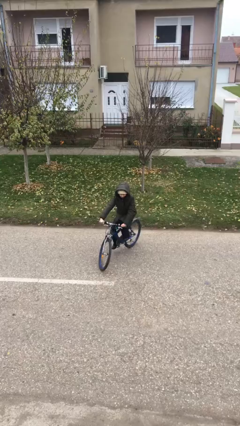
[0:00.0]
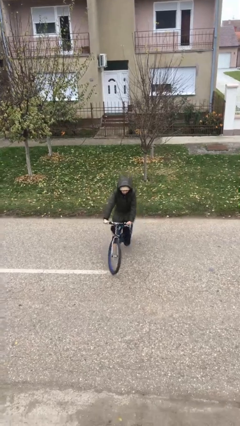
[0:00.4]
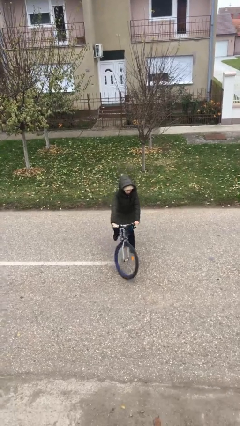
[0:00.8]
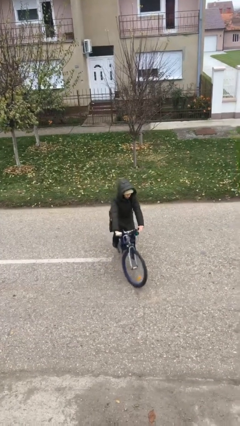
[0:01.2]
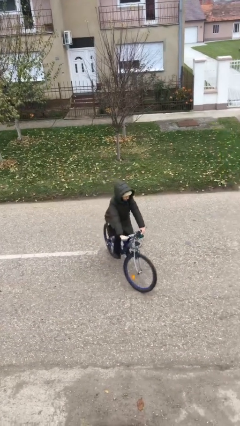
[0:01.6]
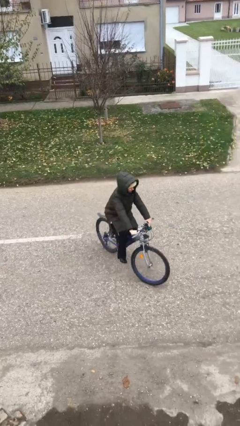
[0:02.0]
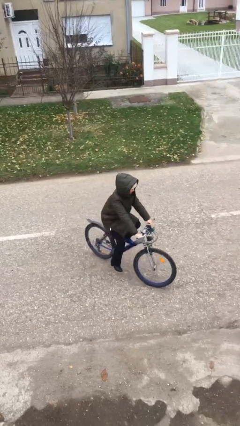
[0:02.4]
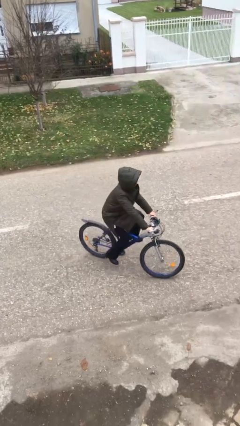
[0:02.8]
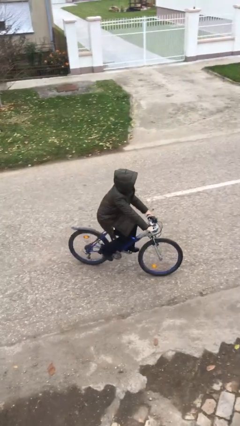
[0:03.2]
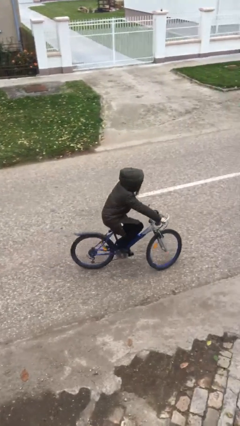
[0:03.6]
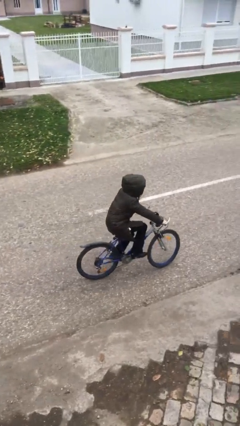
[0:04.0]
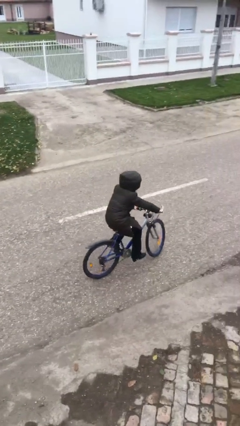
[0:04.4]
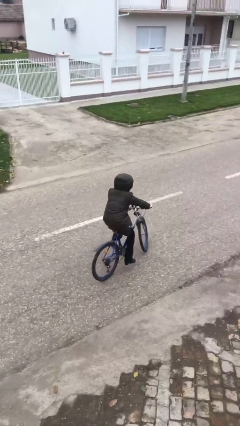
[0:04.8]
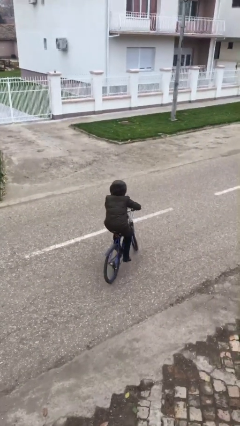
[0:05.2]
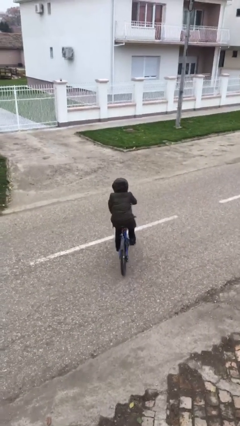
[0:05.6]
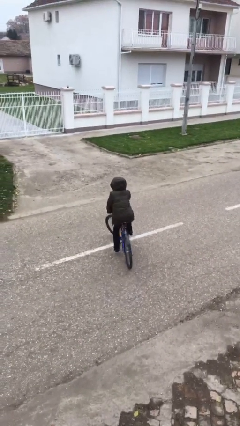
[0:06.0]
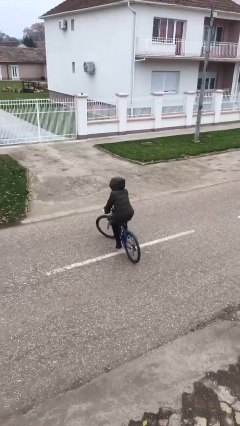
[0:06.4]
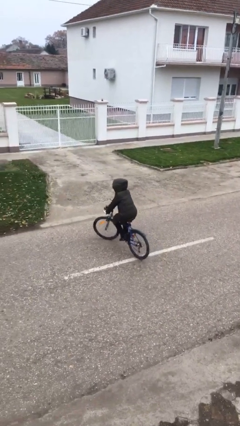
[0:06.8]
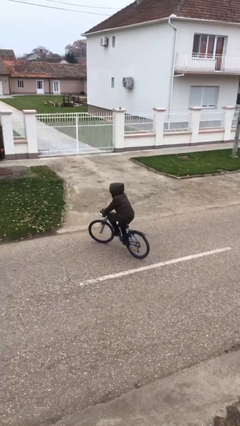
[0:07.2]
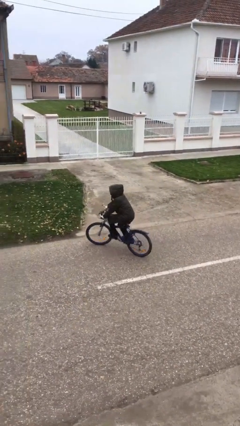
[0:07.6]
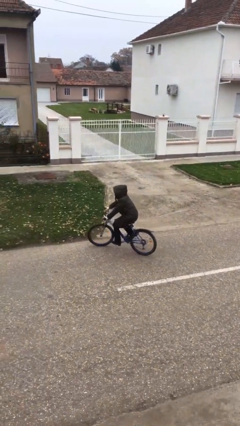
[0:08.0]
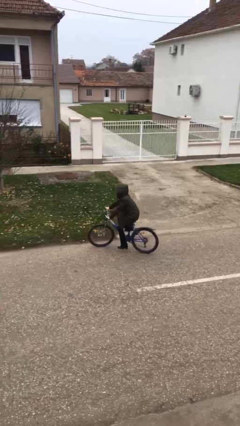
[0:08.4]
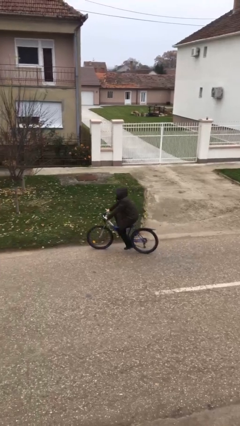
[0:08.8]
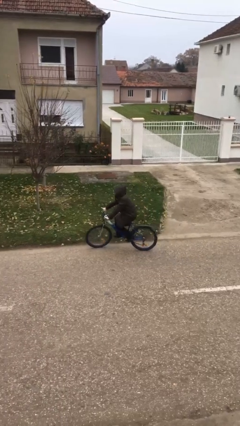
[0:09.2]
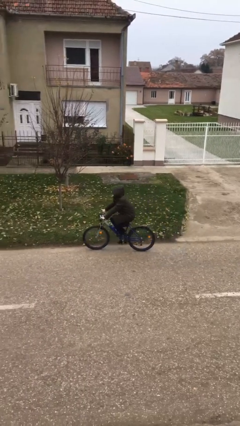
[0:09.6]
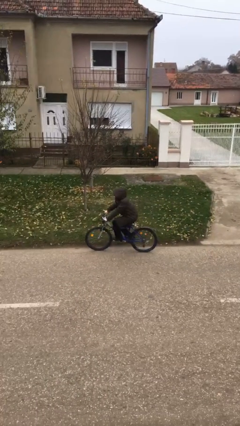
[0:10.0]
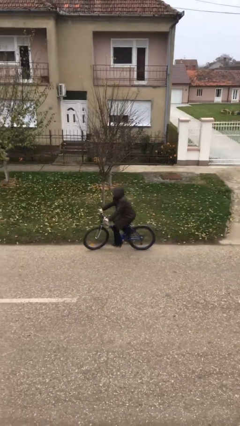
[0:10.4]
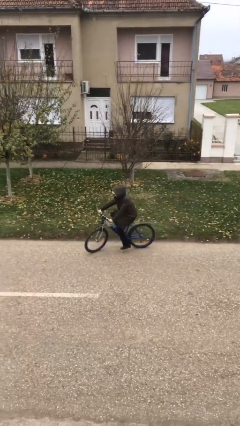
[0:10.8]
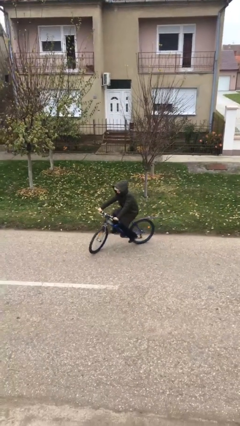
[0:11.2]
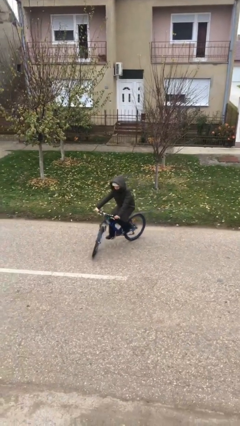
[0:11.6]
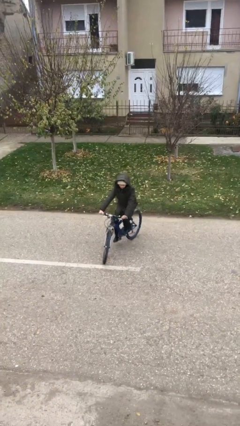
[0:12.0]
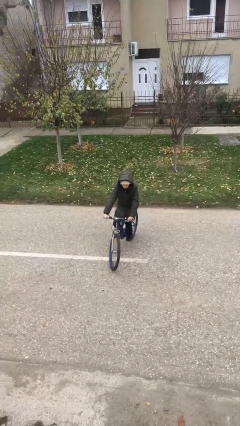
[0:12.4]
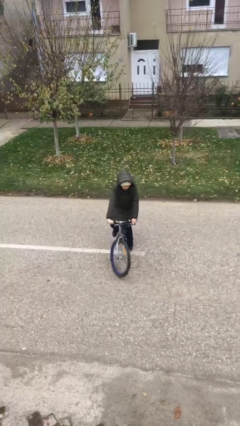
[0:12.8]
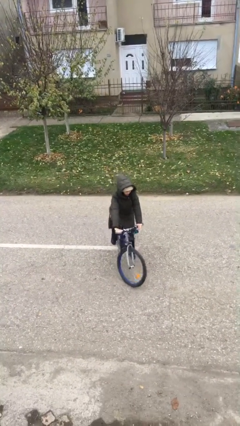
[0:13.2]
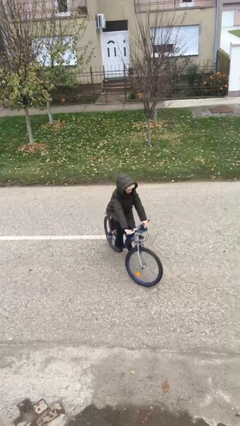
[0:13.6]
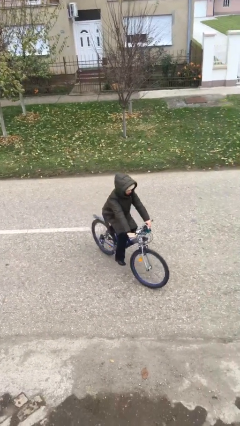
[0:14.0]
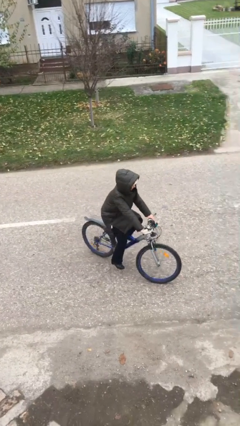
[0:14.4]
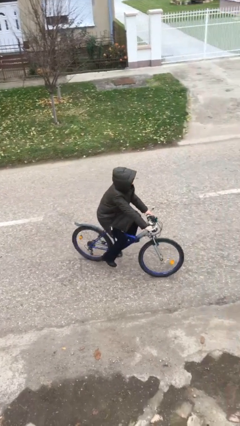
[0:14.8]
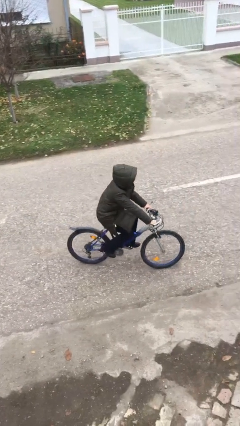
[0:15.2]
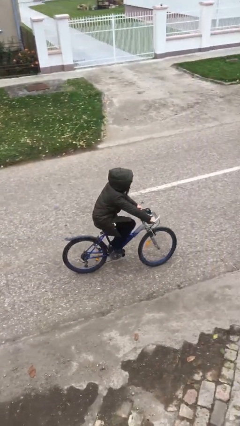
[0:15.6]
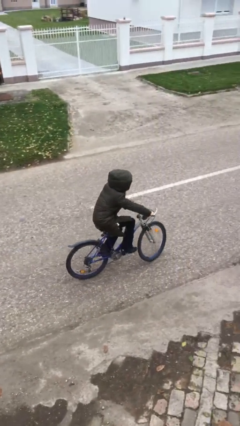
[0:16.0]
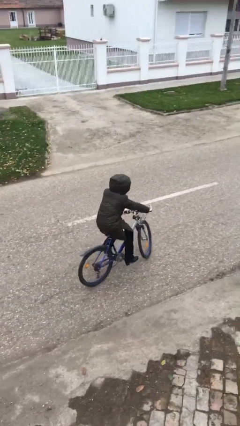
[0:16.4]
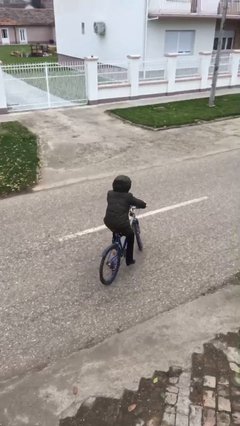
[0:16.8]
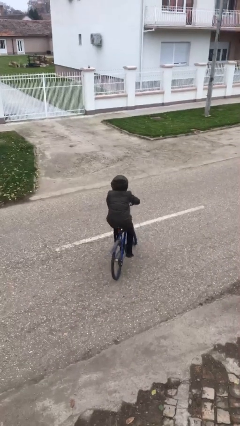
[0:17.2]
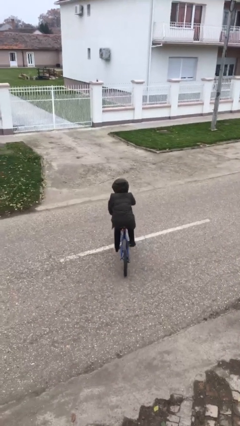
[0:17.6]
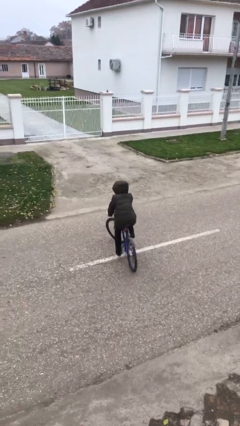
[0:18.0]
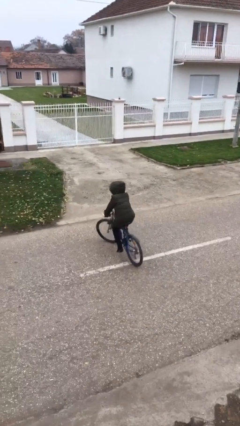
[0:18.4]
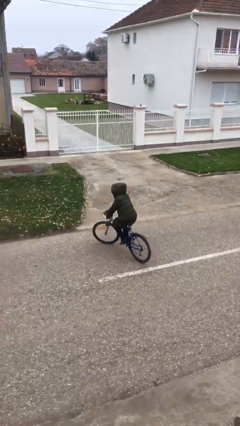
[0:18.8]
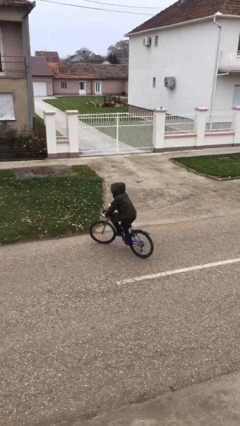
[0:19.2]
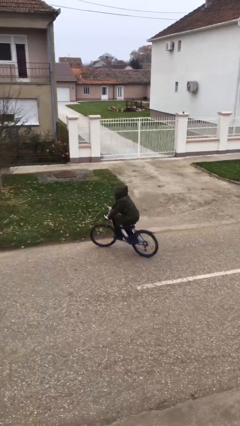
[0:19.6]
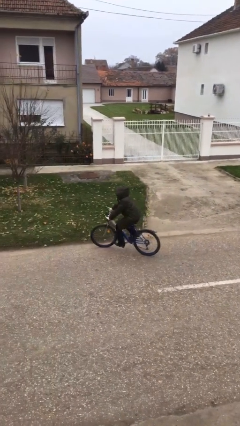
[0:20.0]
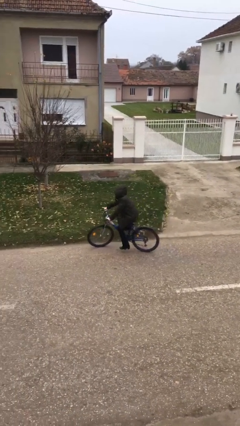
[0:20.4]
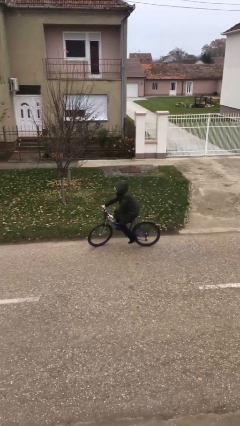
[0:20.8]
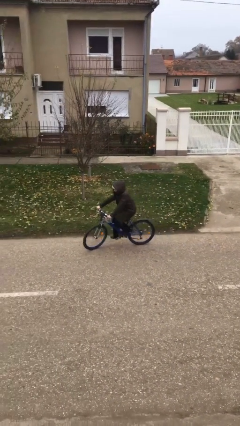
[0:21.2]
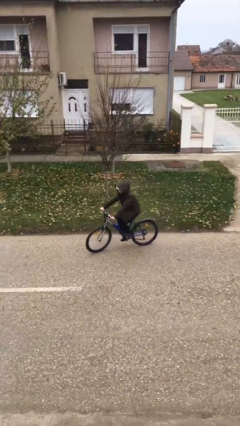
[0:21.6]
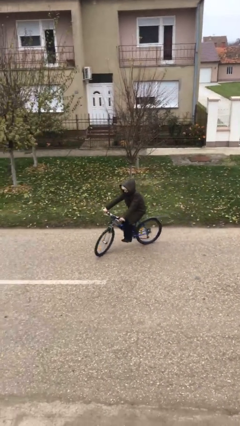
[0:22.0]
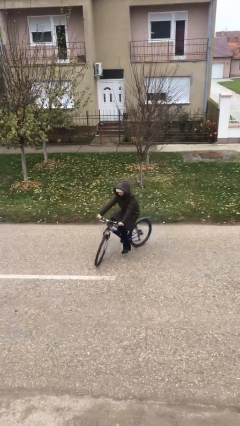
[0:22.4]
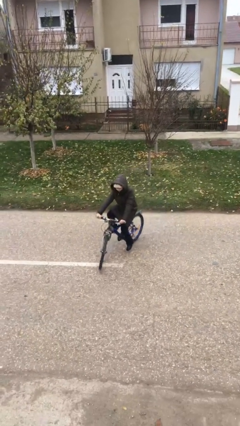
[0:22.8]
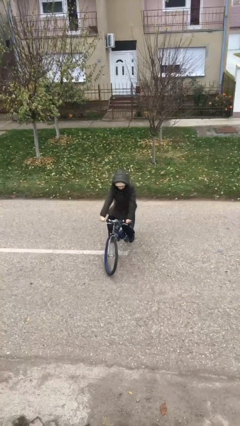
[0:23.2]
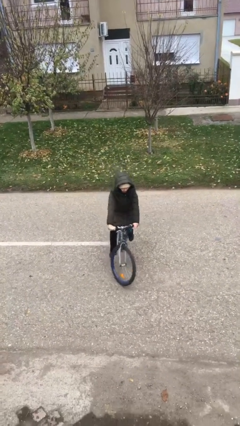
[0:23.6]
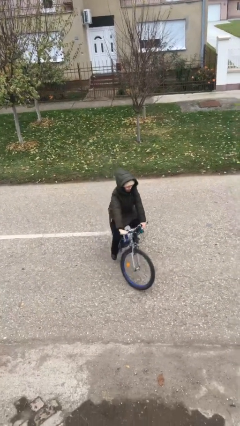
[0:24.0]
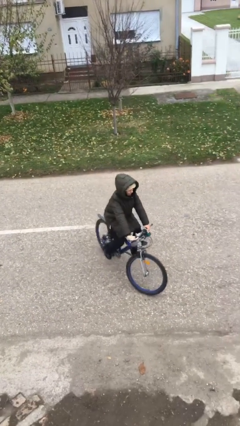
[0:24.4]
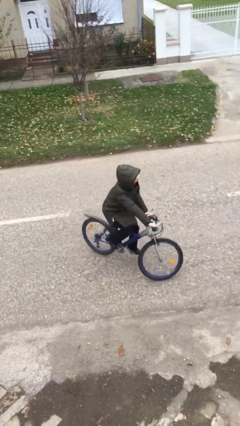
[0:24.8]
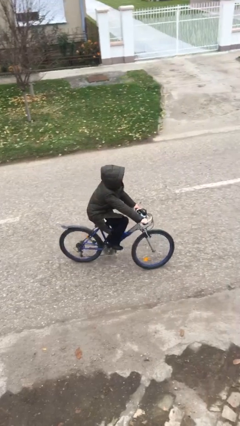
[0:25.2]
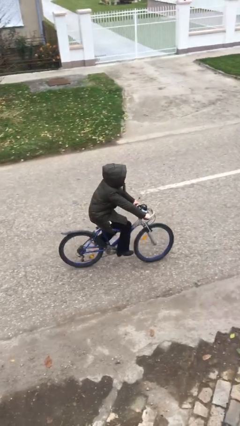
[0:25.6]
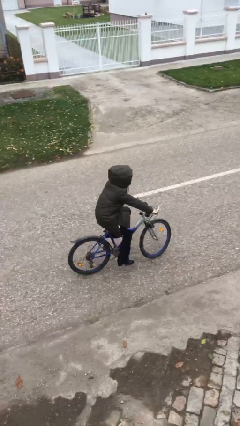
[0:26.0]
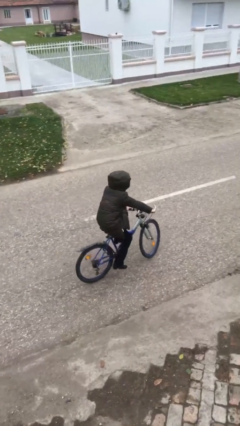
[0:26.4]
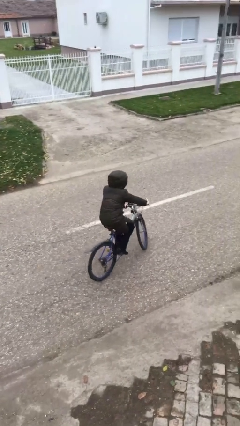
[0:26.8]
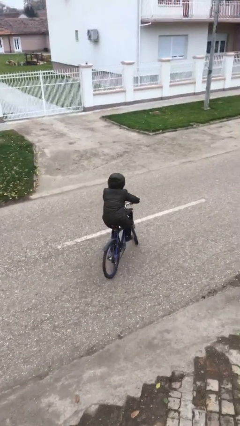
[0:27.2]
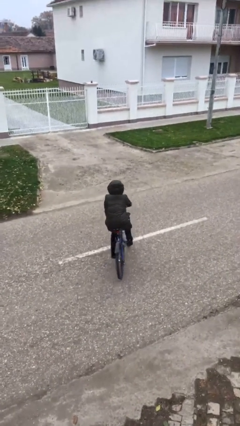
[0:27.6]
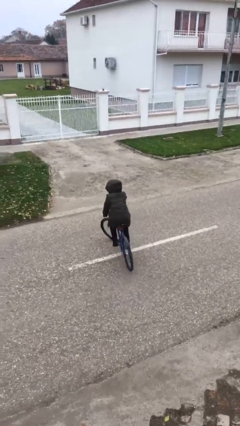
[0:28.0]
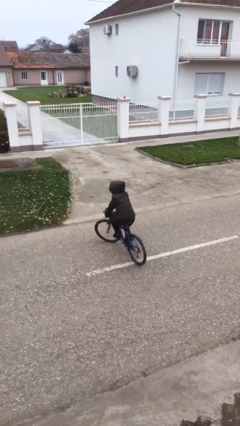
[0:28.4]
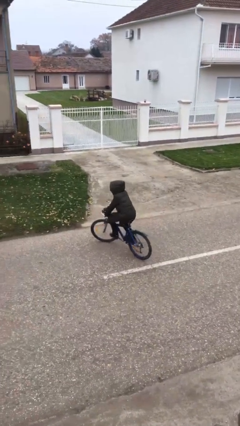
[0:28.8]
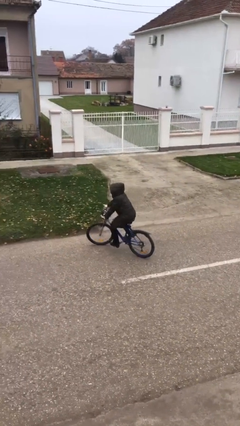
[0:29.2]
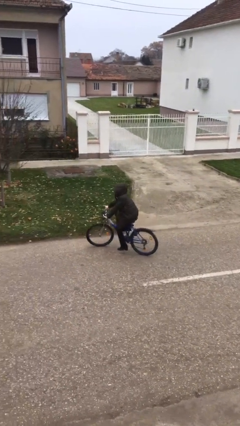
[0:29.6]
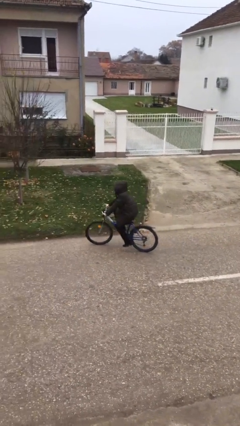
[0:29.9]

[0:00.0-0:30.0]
person rides bicycle

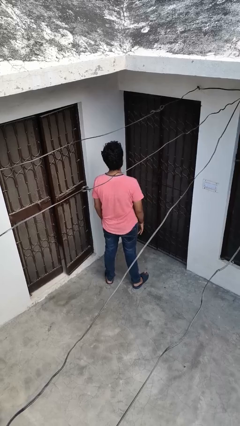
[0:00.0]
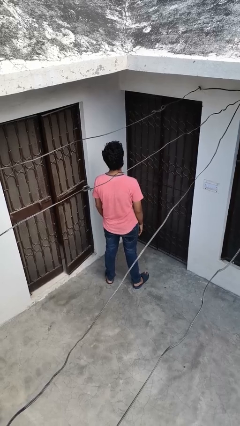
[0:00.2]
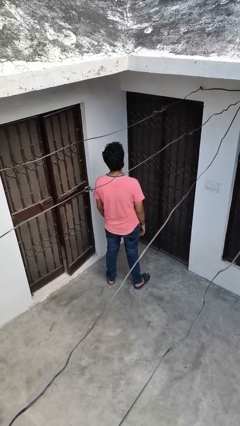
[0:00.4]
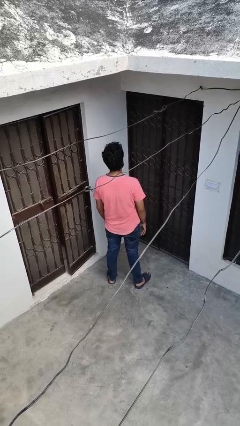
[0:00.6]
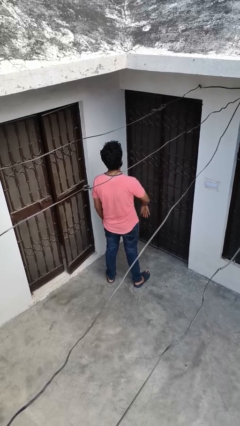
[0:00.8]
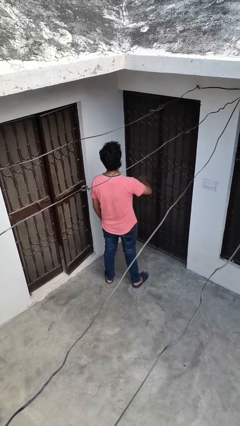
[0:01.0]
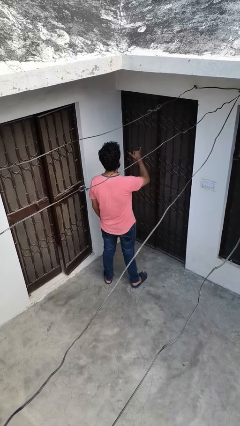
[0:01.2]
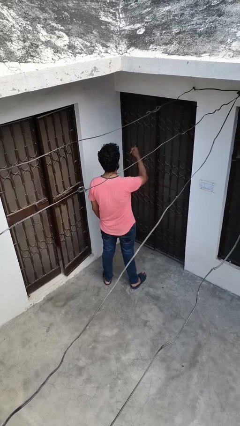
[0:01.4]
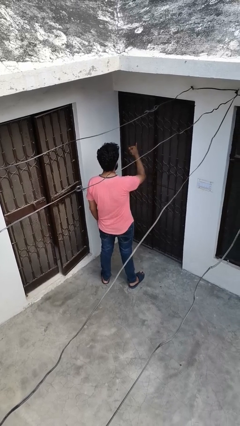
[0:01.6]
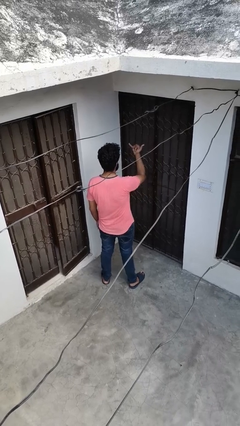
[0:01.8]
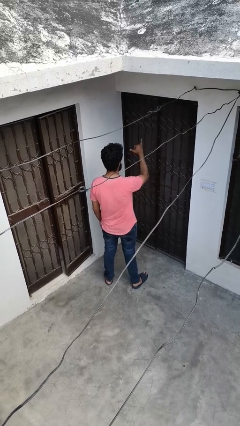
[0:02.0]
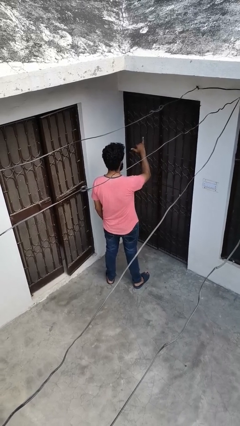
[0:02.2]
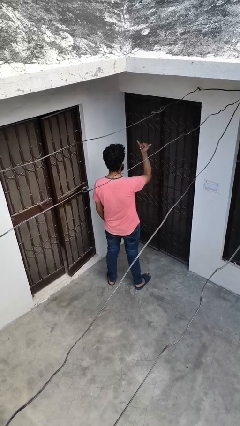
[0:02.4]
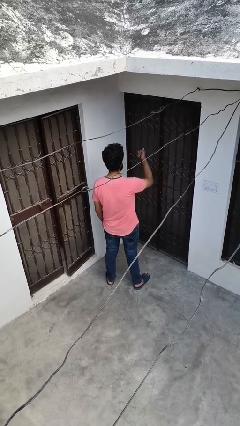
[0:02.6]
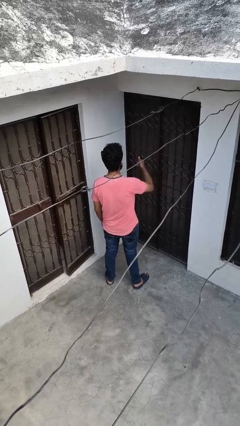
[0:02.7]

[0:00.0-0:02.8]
person gestures hang loose

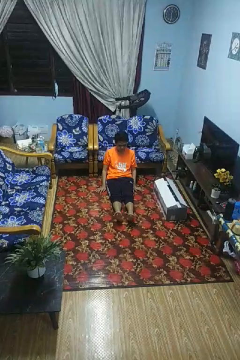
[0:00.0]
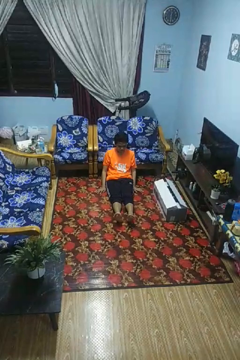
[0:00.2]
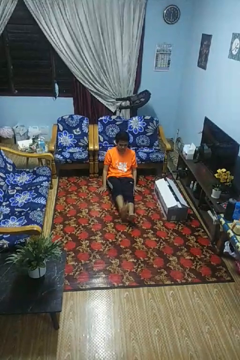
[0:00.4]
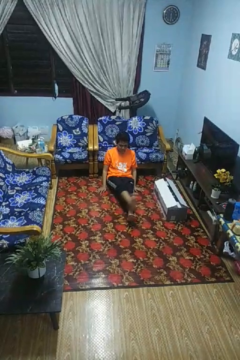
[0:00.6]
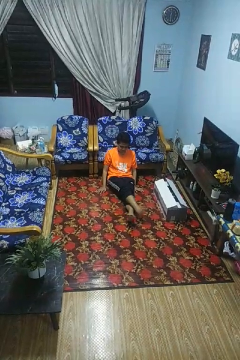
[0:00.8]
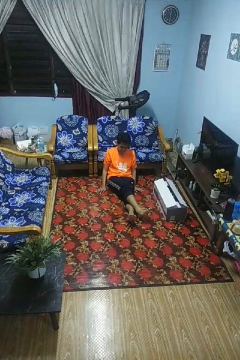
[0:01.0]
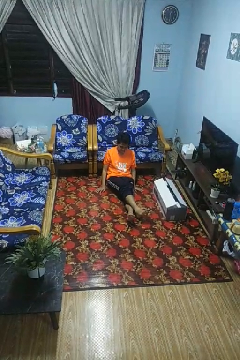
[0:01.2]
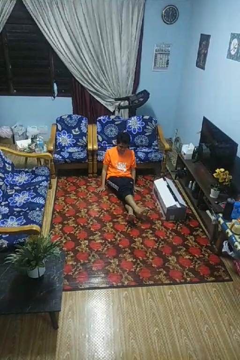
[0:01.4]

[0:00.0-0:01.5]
person crosses legs
